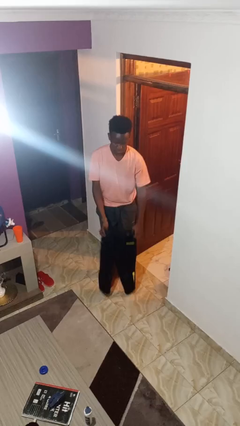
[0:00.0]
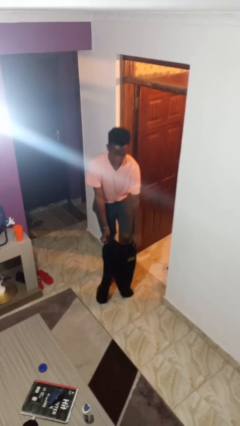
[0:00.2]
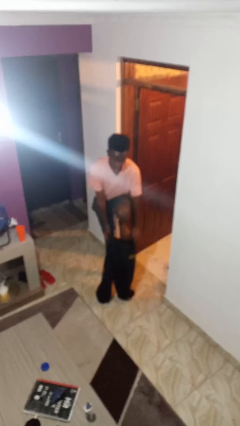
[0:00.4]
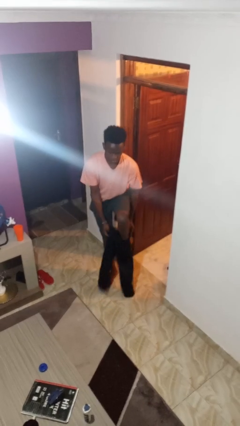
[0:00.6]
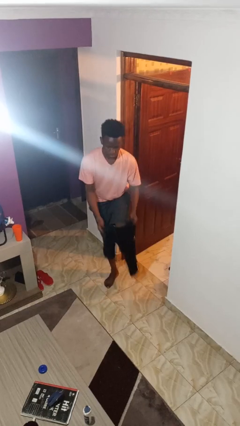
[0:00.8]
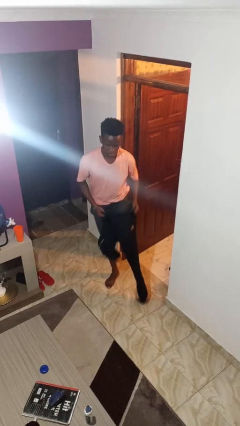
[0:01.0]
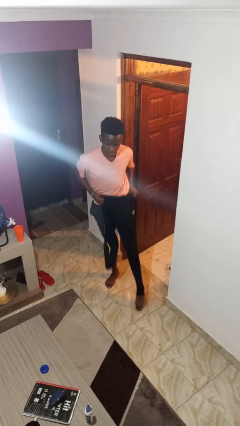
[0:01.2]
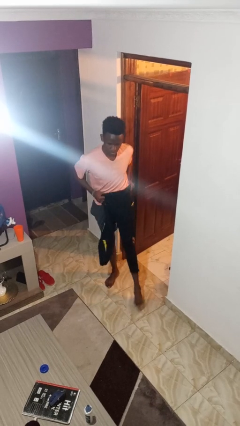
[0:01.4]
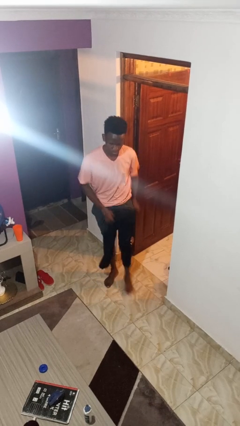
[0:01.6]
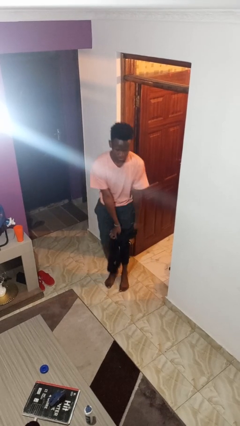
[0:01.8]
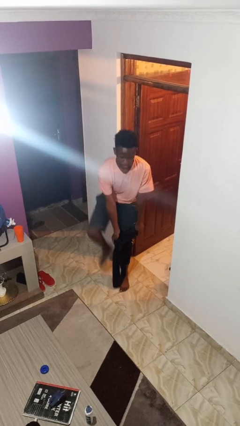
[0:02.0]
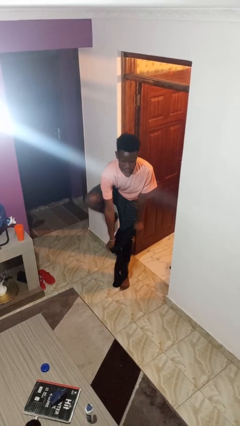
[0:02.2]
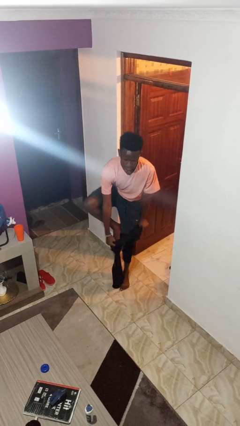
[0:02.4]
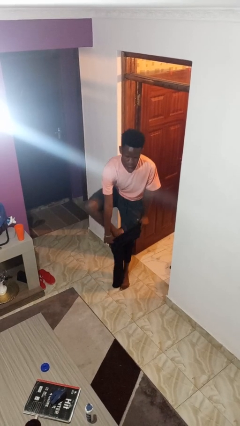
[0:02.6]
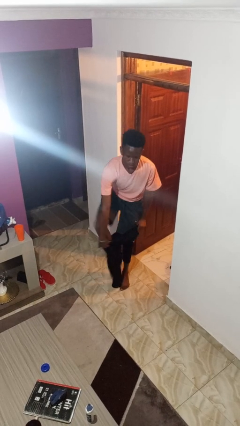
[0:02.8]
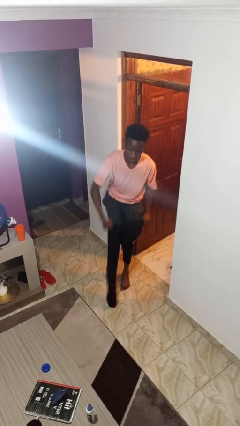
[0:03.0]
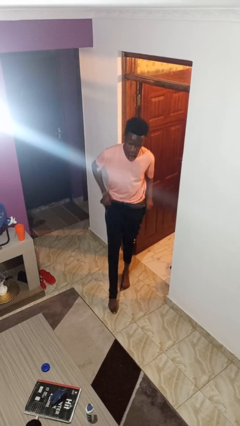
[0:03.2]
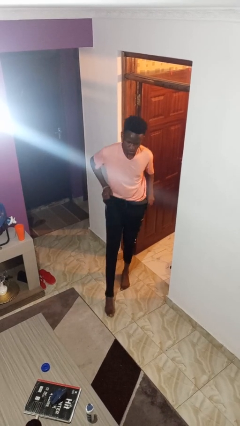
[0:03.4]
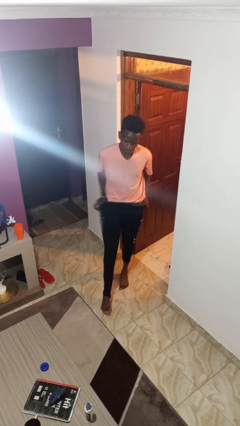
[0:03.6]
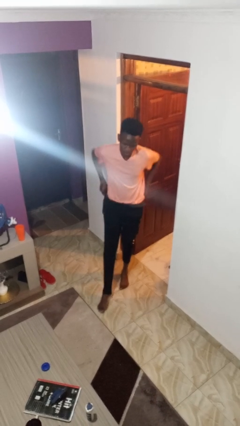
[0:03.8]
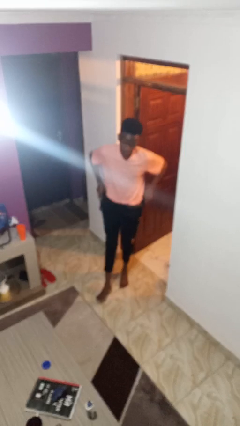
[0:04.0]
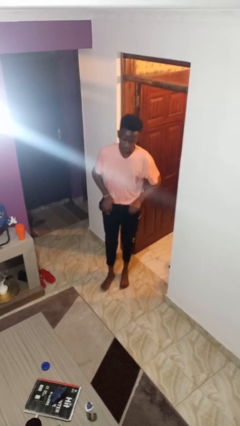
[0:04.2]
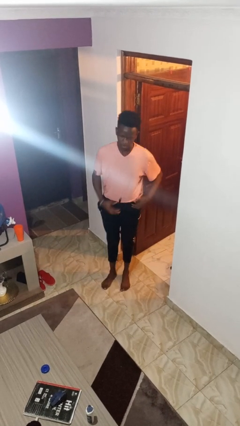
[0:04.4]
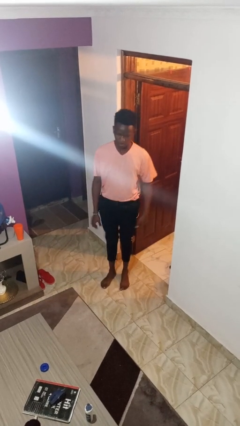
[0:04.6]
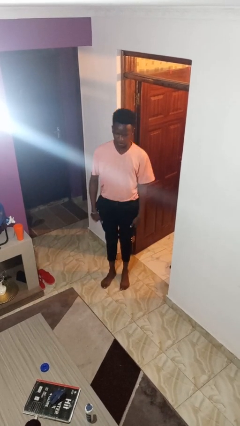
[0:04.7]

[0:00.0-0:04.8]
person puts on pants

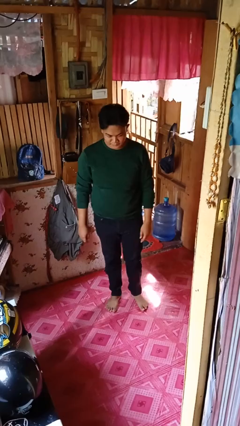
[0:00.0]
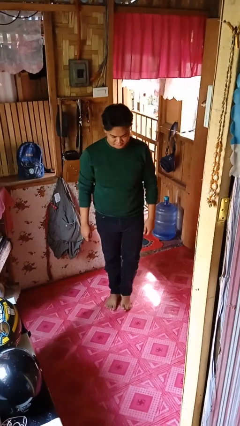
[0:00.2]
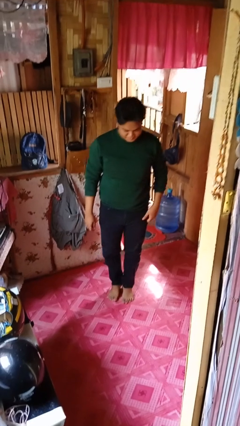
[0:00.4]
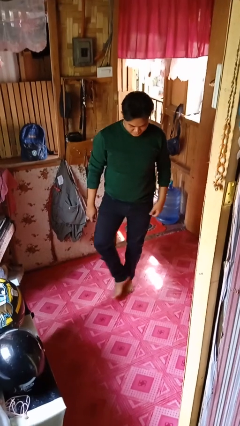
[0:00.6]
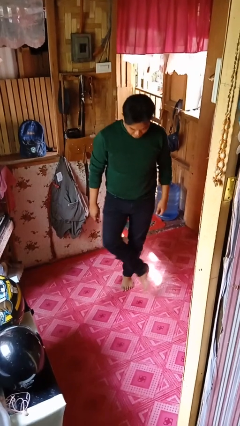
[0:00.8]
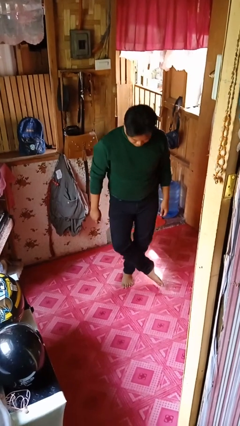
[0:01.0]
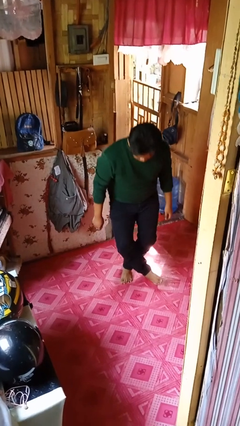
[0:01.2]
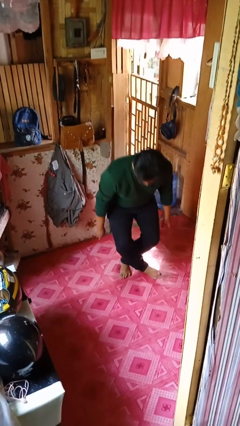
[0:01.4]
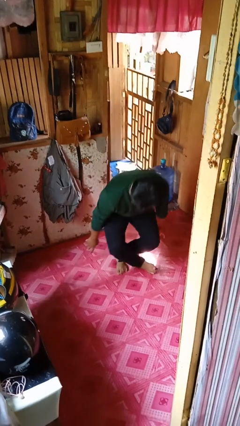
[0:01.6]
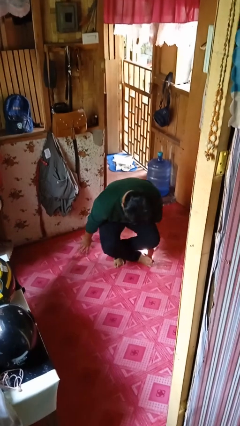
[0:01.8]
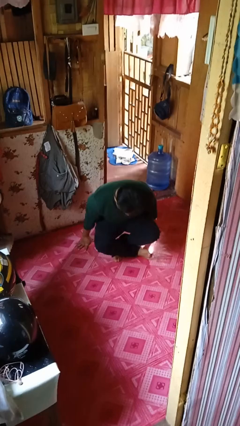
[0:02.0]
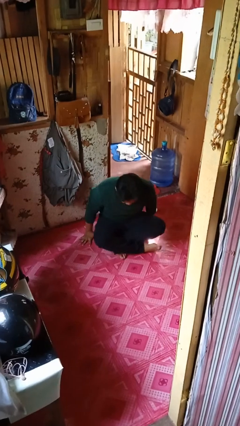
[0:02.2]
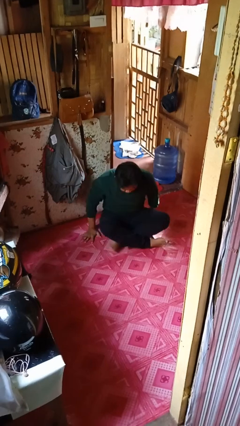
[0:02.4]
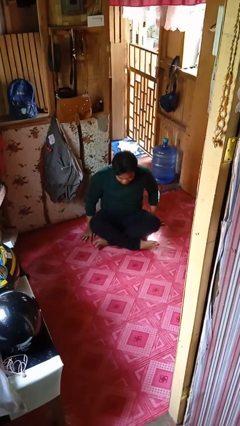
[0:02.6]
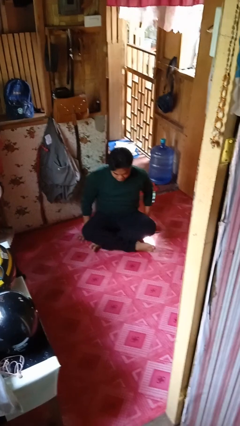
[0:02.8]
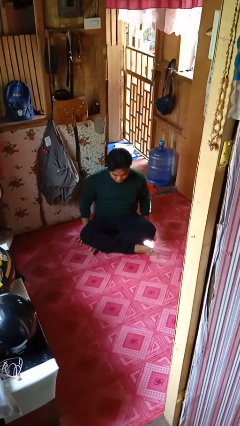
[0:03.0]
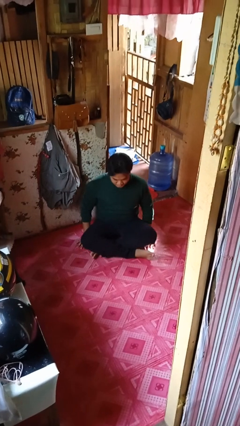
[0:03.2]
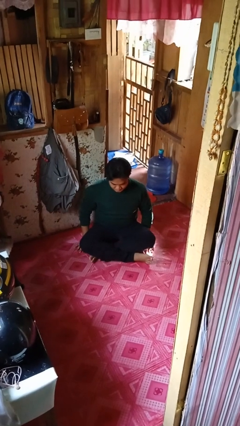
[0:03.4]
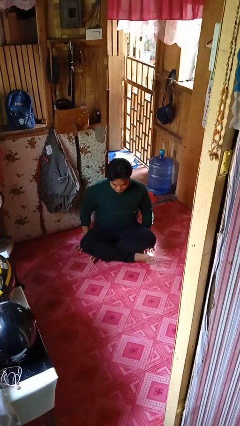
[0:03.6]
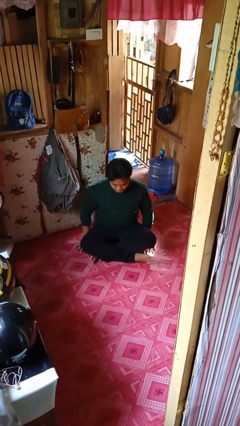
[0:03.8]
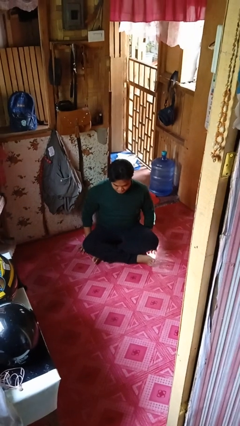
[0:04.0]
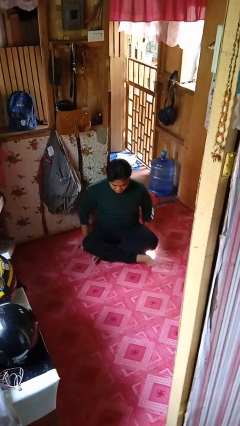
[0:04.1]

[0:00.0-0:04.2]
person sits crisscross

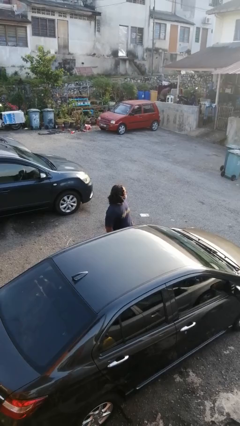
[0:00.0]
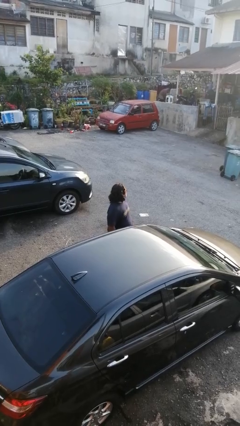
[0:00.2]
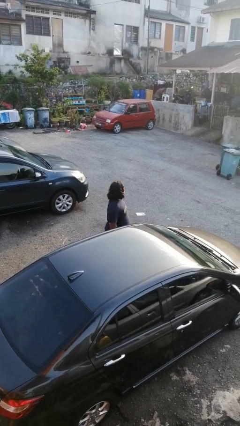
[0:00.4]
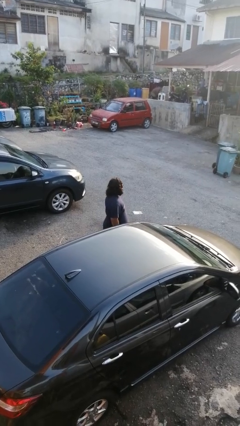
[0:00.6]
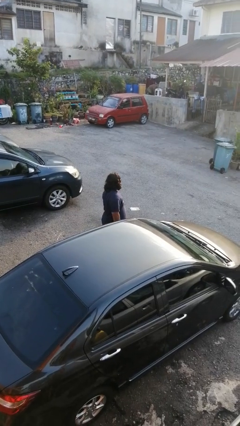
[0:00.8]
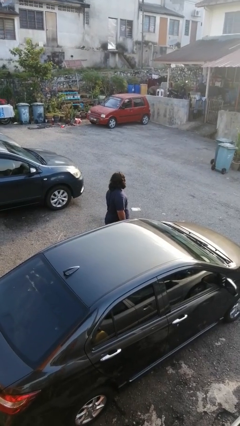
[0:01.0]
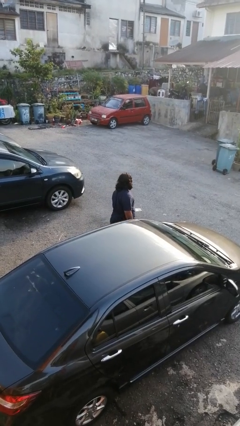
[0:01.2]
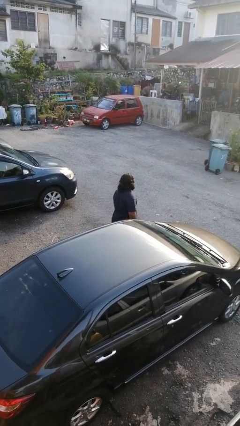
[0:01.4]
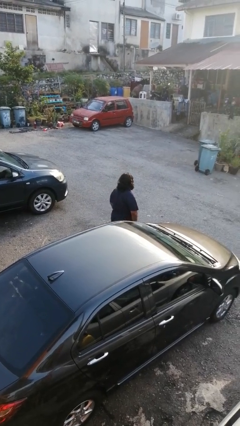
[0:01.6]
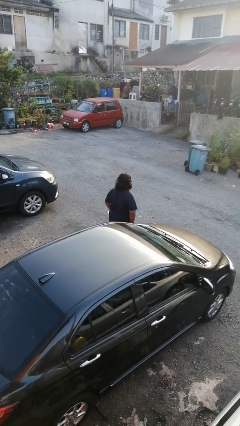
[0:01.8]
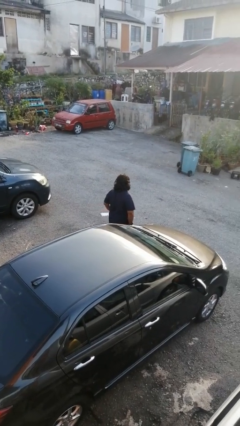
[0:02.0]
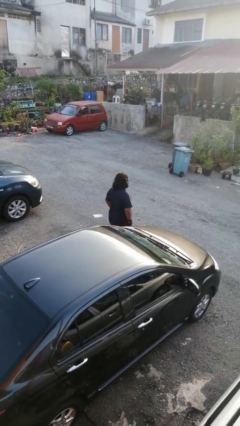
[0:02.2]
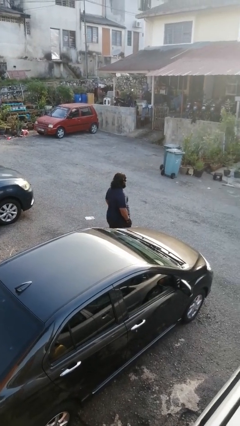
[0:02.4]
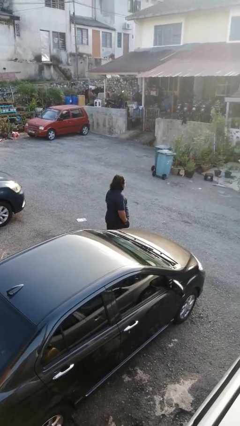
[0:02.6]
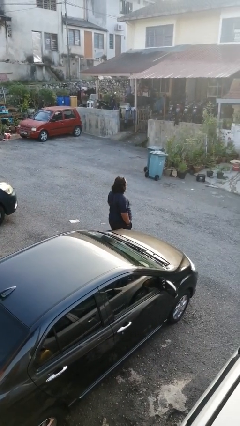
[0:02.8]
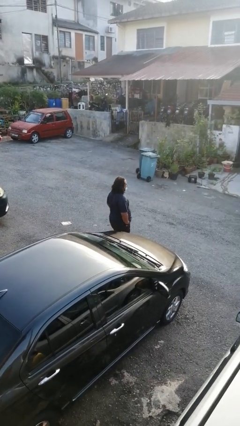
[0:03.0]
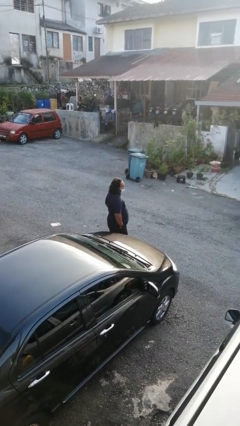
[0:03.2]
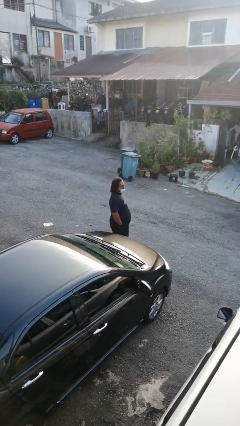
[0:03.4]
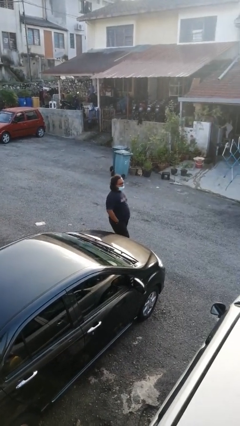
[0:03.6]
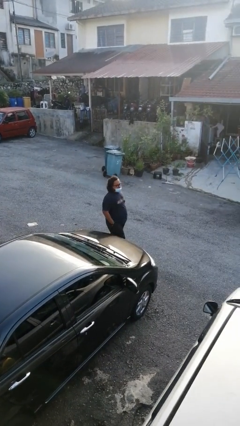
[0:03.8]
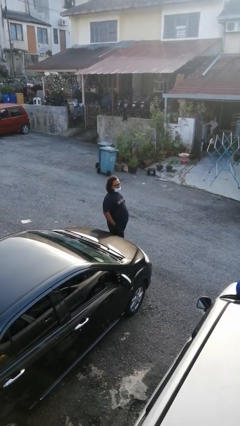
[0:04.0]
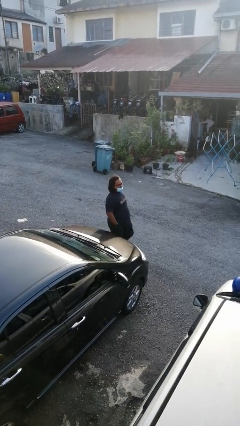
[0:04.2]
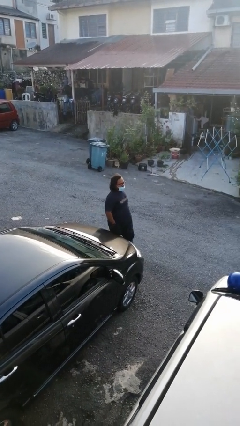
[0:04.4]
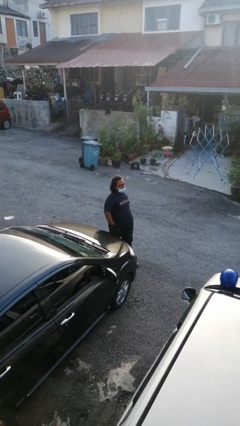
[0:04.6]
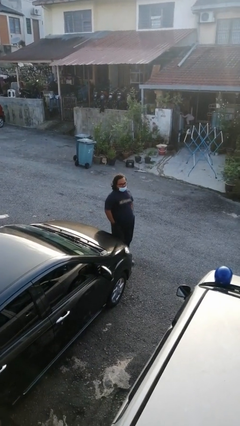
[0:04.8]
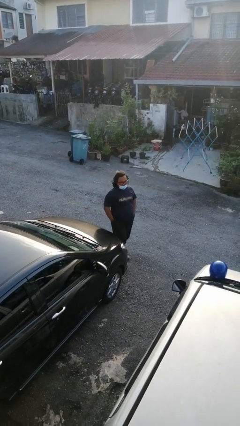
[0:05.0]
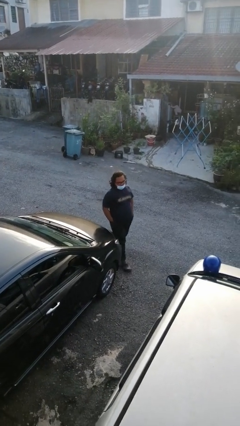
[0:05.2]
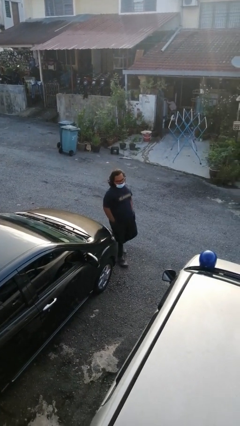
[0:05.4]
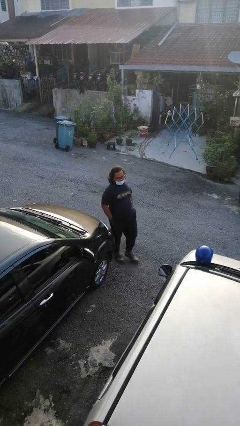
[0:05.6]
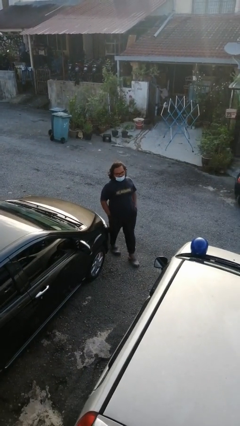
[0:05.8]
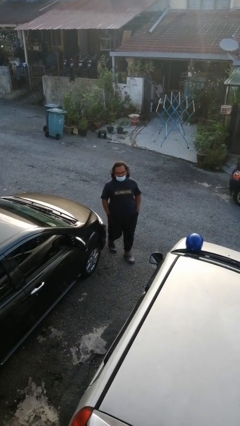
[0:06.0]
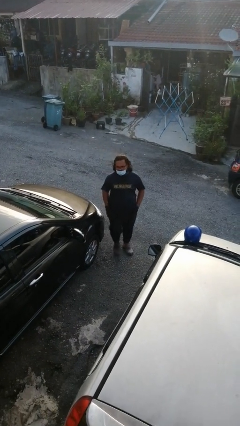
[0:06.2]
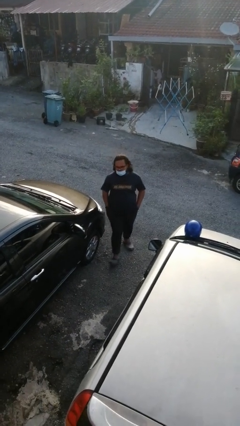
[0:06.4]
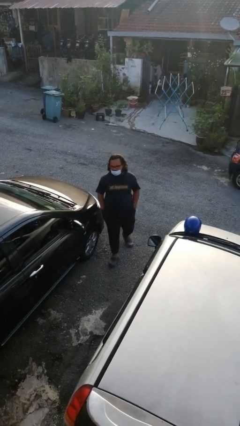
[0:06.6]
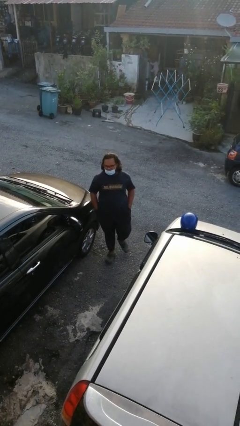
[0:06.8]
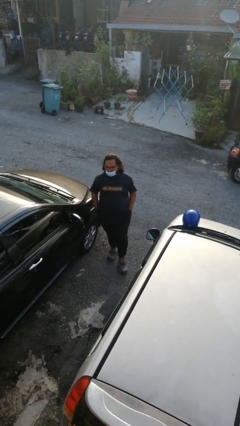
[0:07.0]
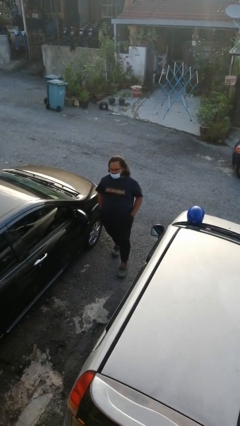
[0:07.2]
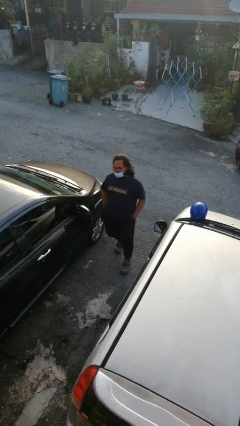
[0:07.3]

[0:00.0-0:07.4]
person walks around car
